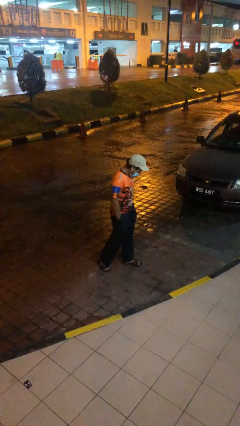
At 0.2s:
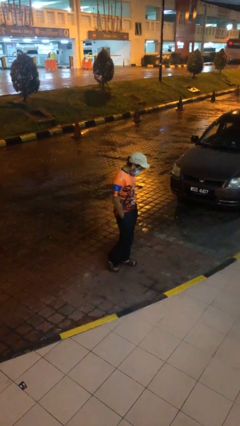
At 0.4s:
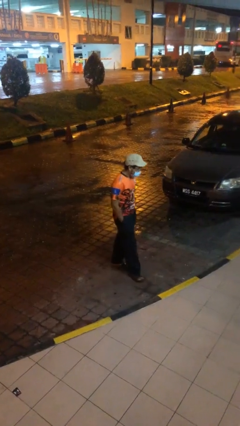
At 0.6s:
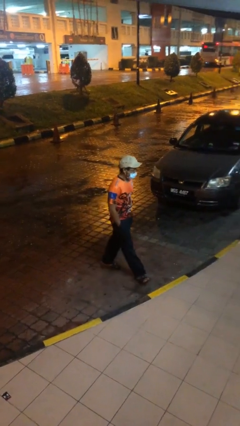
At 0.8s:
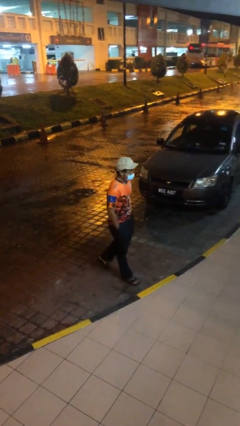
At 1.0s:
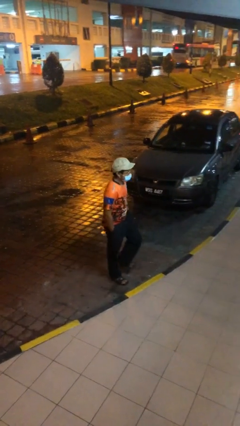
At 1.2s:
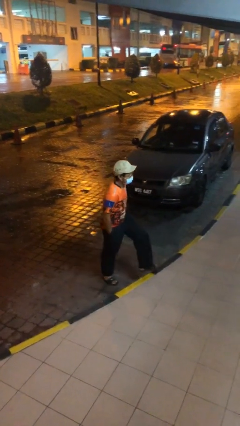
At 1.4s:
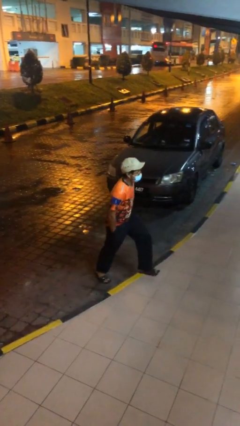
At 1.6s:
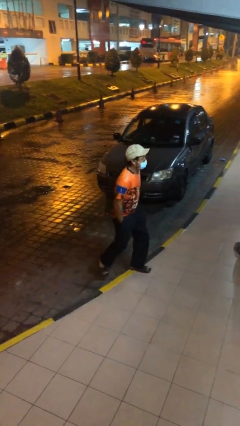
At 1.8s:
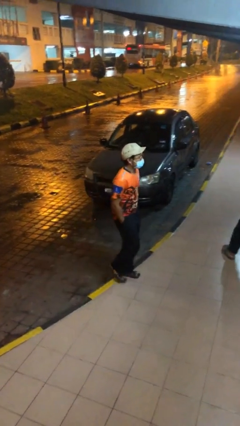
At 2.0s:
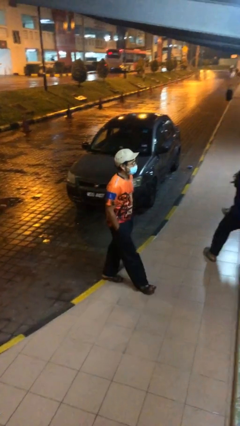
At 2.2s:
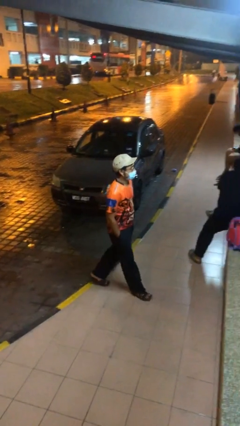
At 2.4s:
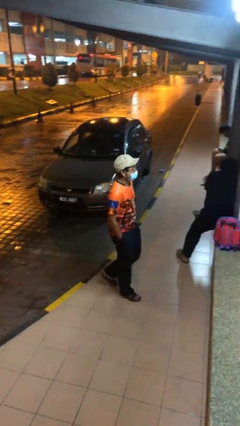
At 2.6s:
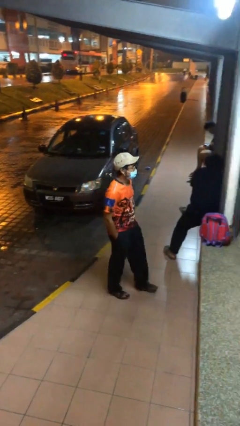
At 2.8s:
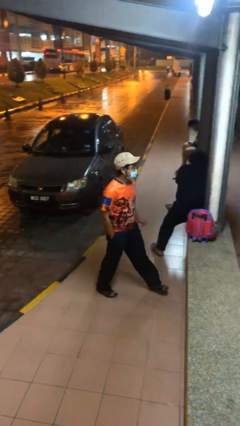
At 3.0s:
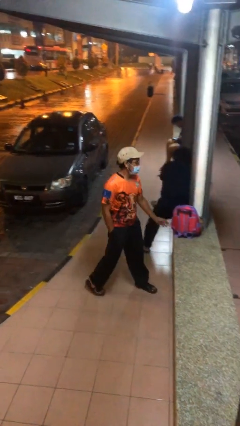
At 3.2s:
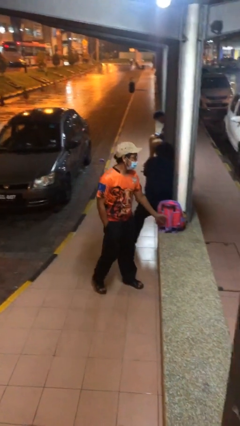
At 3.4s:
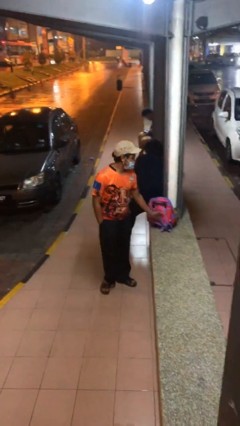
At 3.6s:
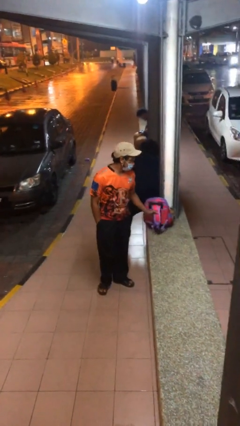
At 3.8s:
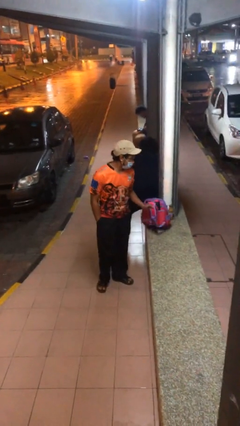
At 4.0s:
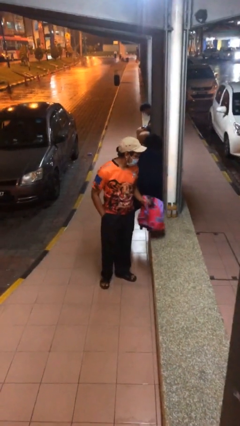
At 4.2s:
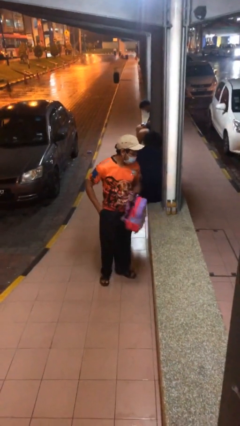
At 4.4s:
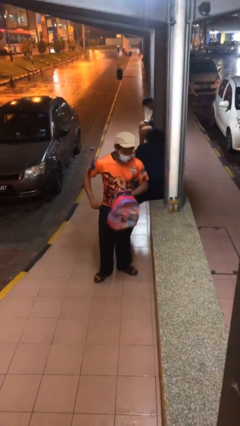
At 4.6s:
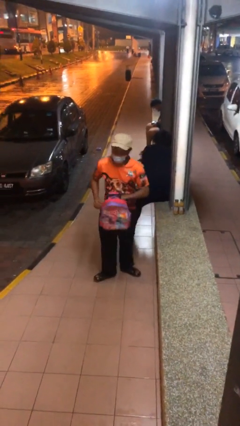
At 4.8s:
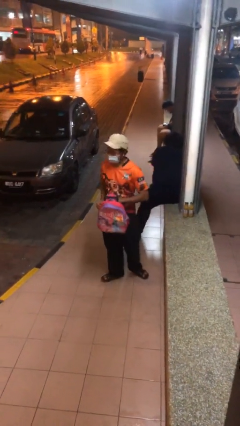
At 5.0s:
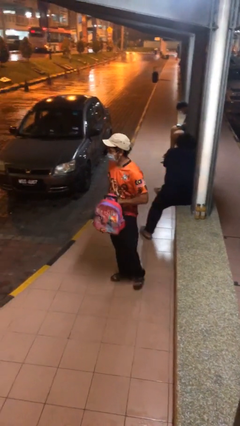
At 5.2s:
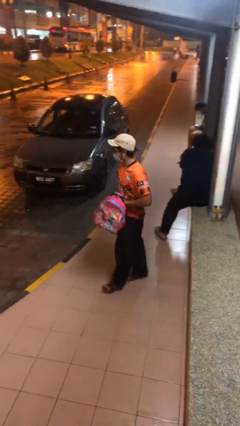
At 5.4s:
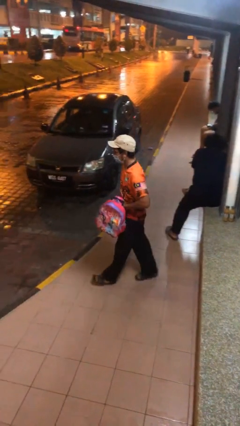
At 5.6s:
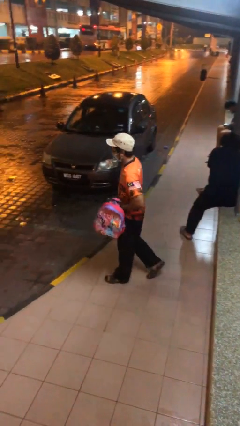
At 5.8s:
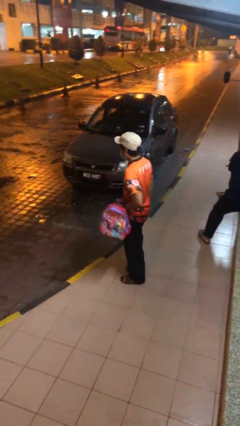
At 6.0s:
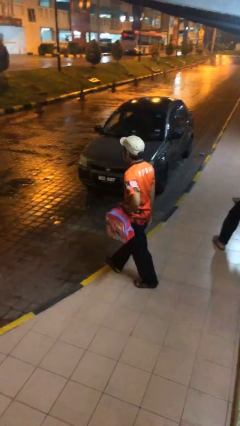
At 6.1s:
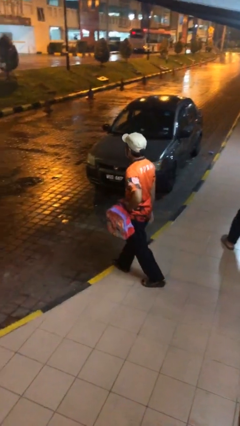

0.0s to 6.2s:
person steals object from person

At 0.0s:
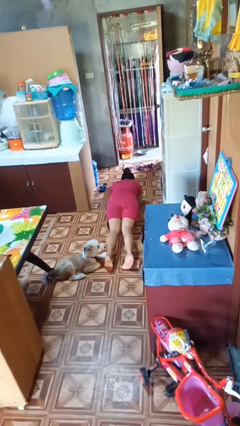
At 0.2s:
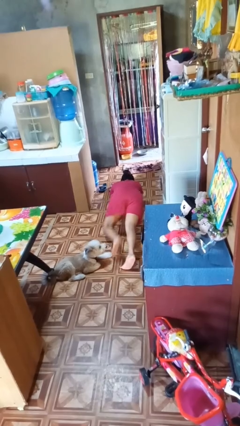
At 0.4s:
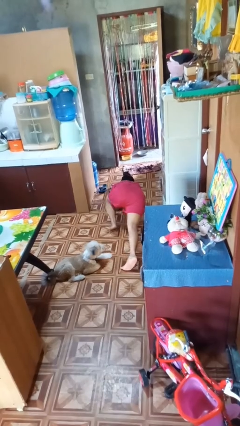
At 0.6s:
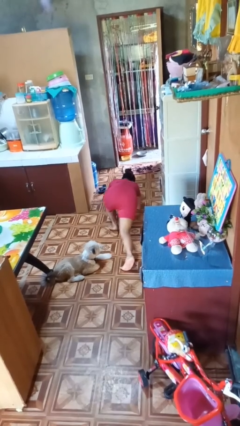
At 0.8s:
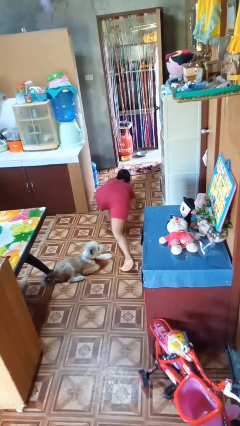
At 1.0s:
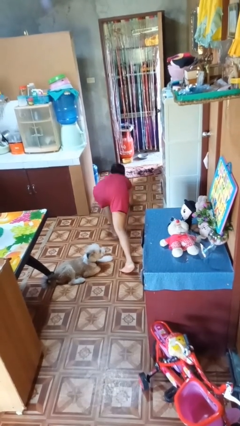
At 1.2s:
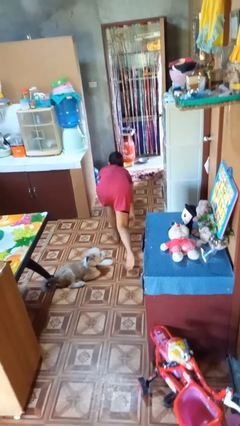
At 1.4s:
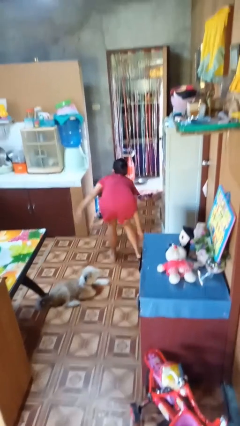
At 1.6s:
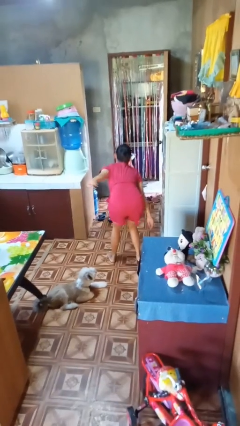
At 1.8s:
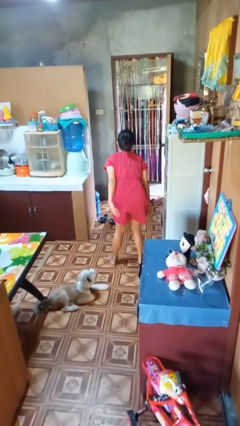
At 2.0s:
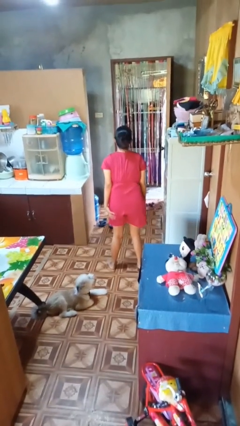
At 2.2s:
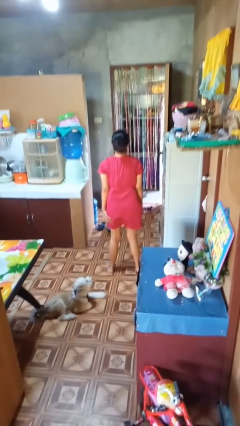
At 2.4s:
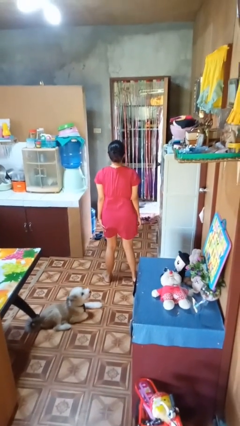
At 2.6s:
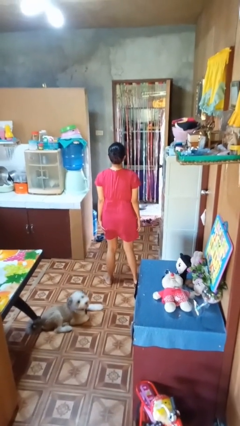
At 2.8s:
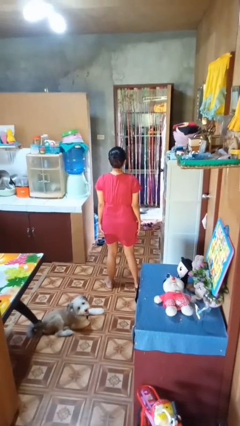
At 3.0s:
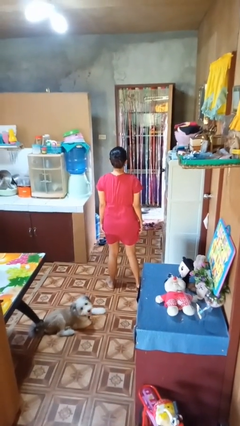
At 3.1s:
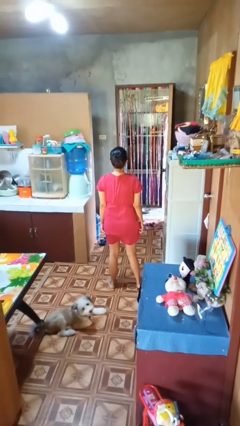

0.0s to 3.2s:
person stands up from floor

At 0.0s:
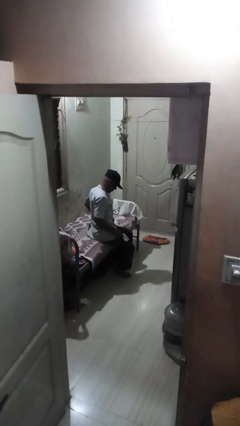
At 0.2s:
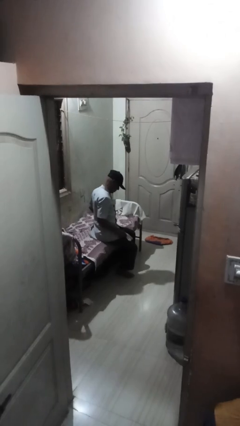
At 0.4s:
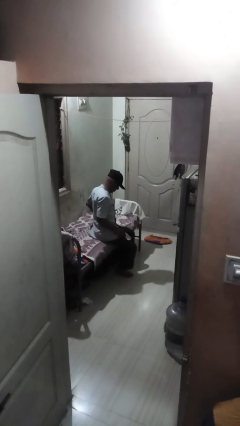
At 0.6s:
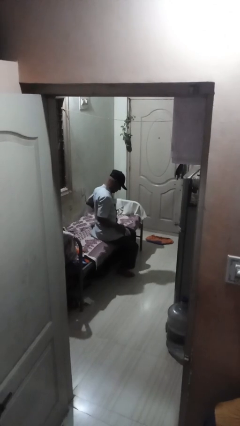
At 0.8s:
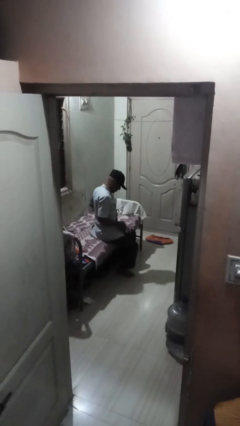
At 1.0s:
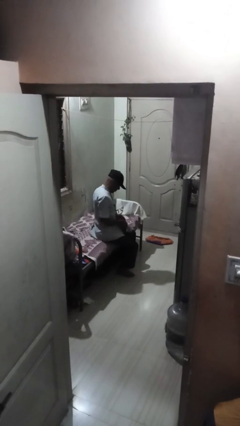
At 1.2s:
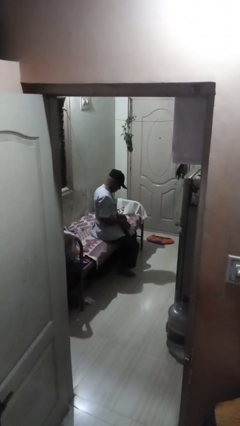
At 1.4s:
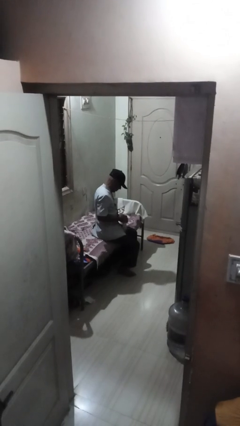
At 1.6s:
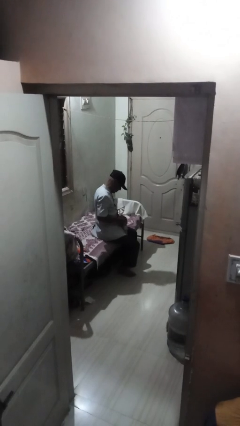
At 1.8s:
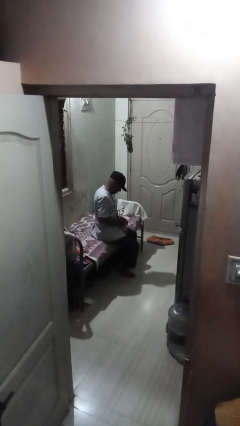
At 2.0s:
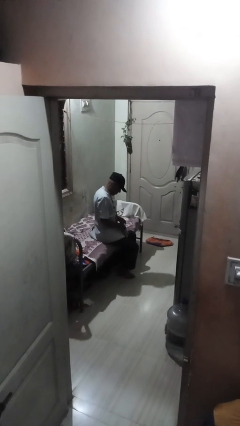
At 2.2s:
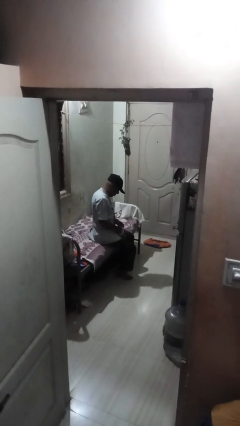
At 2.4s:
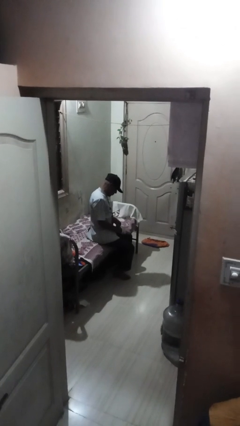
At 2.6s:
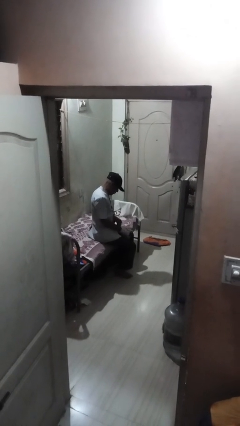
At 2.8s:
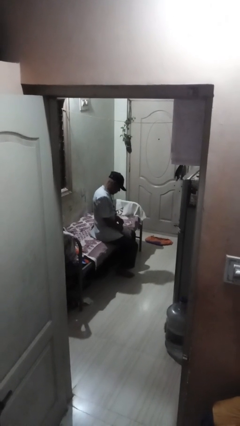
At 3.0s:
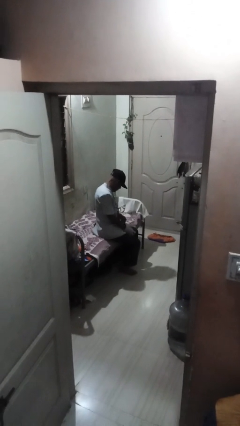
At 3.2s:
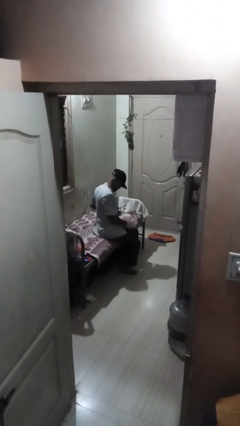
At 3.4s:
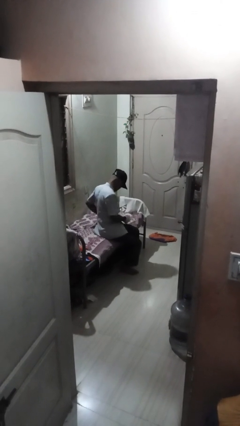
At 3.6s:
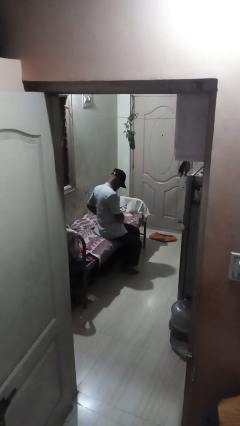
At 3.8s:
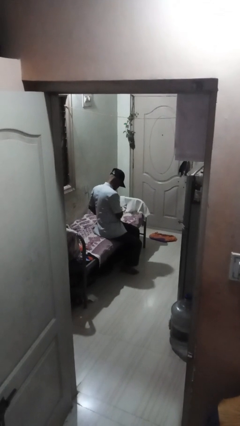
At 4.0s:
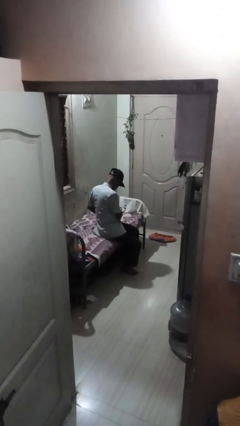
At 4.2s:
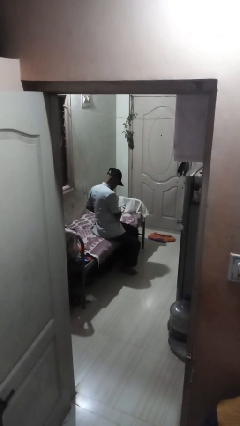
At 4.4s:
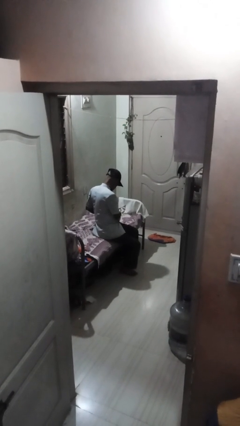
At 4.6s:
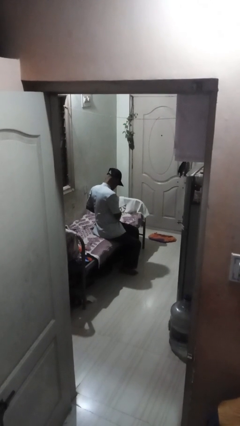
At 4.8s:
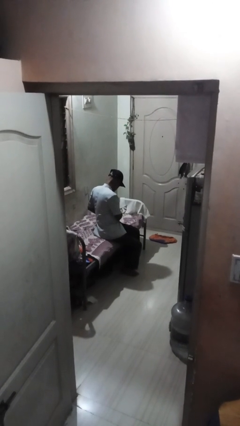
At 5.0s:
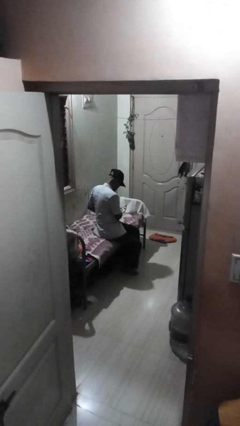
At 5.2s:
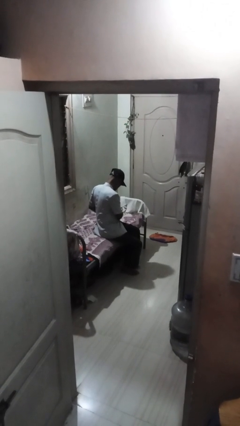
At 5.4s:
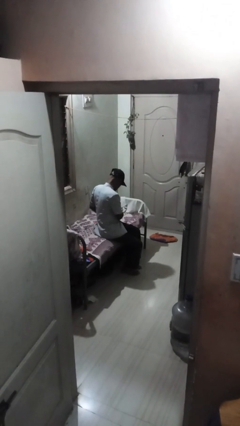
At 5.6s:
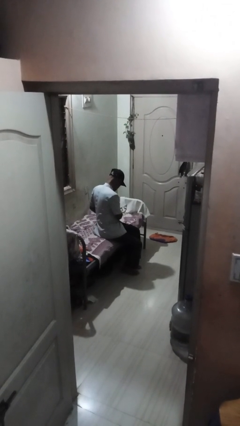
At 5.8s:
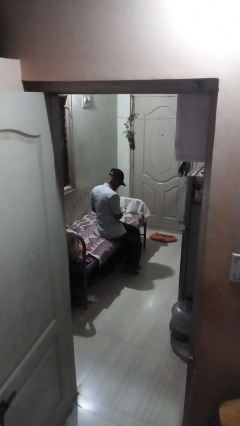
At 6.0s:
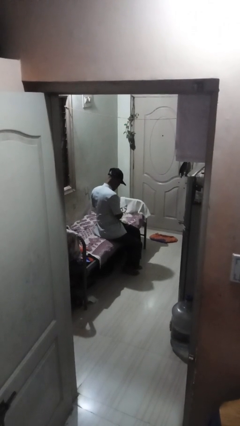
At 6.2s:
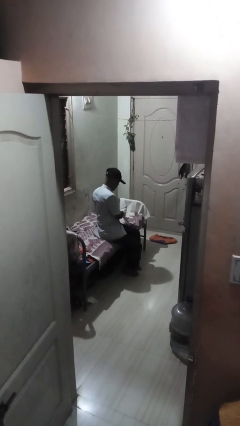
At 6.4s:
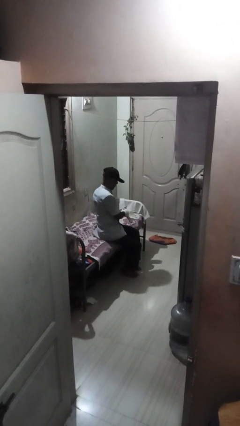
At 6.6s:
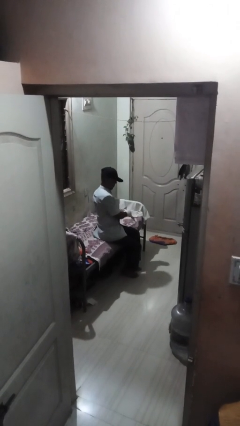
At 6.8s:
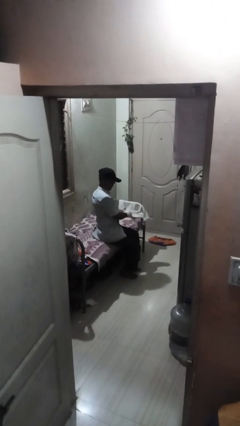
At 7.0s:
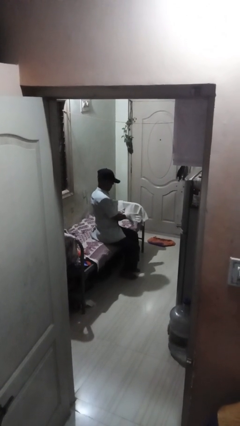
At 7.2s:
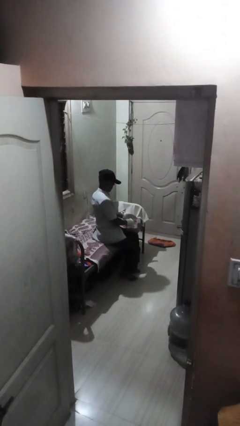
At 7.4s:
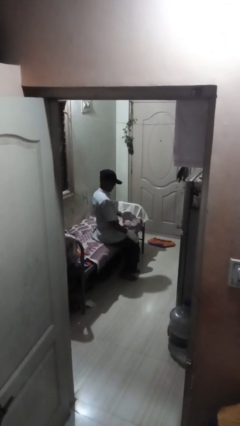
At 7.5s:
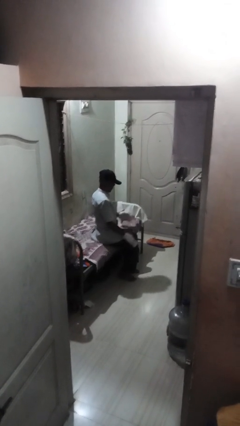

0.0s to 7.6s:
person puts on gloves

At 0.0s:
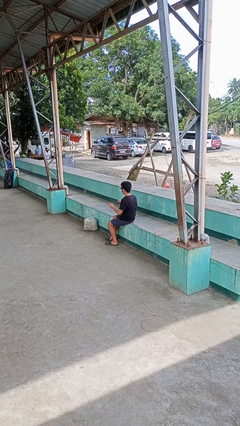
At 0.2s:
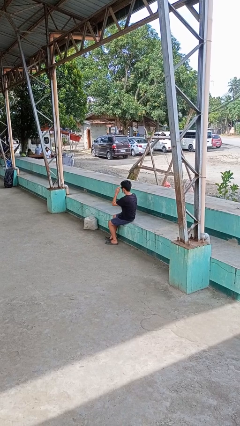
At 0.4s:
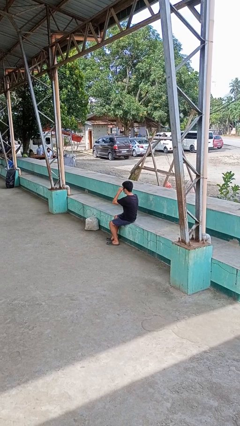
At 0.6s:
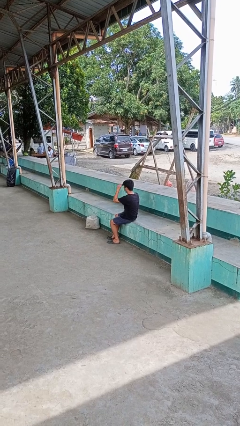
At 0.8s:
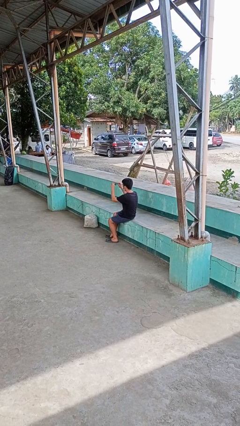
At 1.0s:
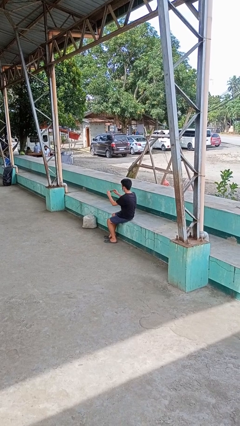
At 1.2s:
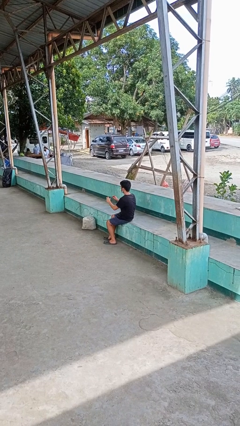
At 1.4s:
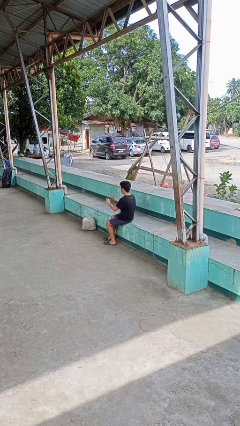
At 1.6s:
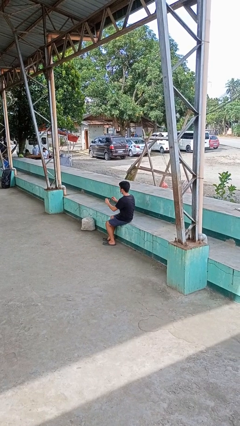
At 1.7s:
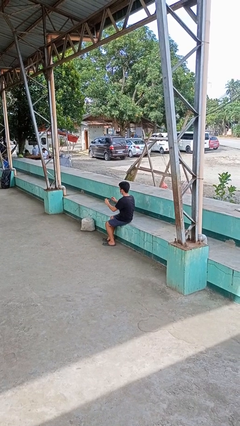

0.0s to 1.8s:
person takes off sunglasses
